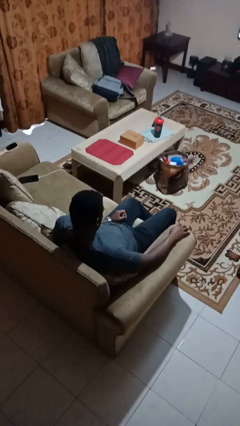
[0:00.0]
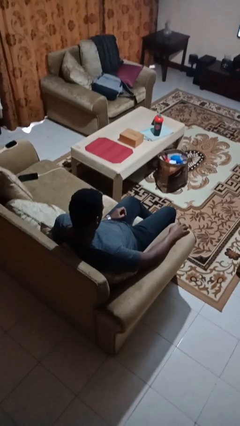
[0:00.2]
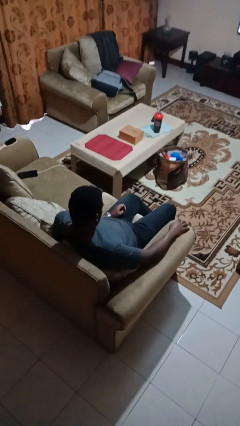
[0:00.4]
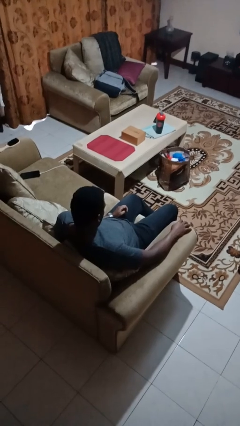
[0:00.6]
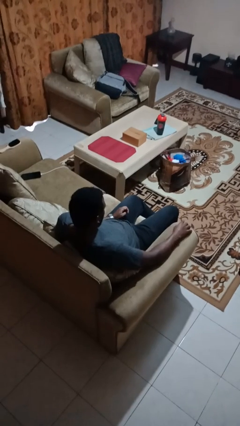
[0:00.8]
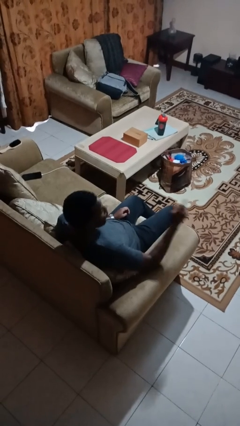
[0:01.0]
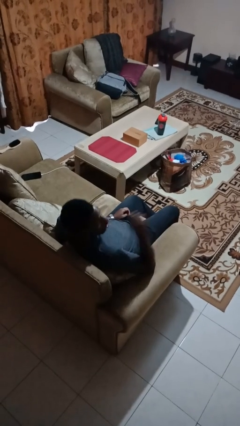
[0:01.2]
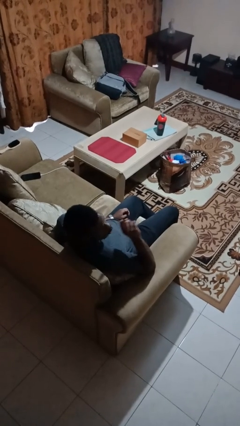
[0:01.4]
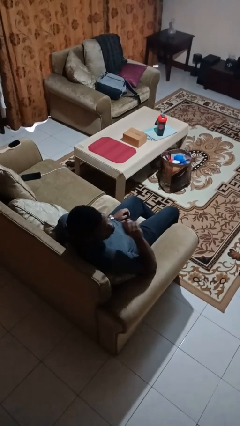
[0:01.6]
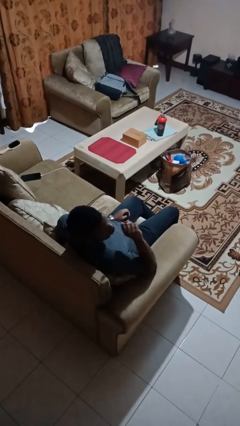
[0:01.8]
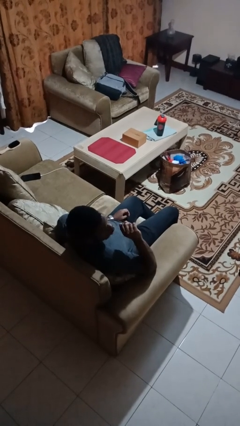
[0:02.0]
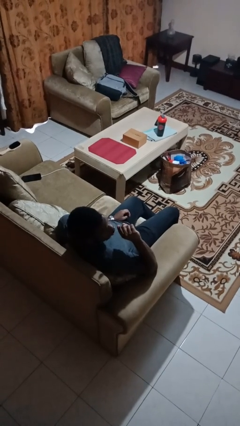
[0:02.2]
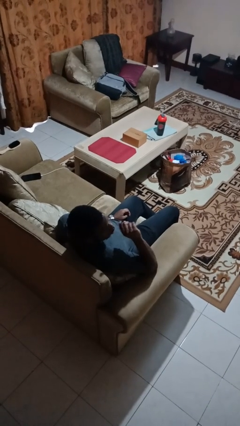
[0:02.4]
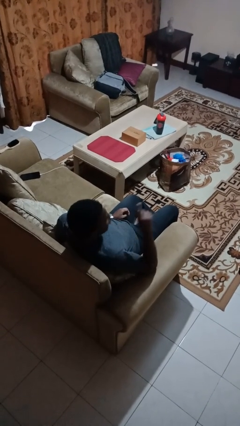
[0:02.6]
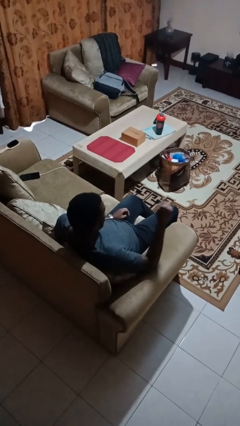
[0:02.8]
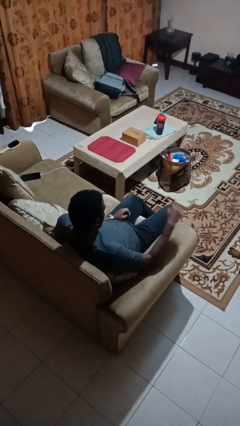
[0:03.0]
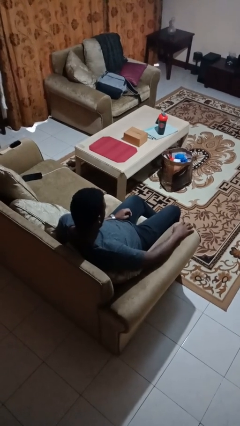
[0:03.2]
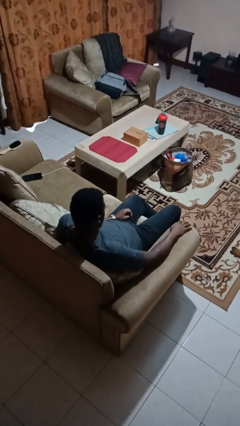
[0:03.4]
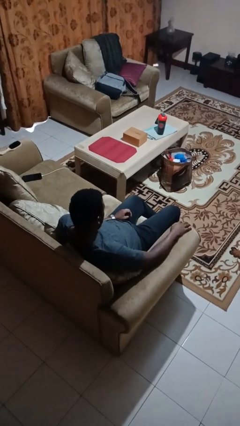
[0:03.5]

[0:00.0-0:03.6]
person gestures be quiet

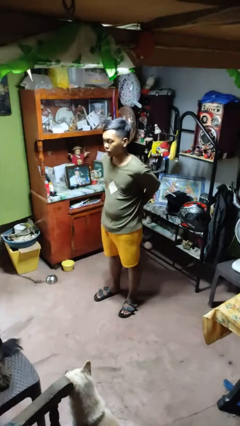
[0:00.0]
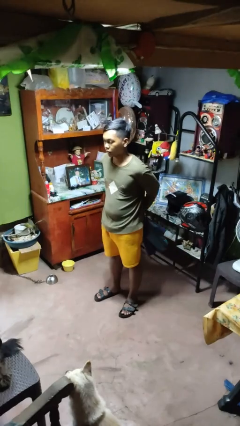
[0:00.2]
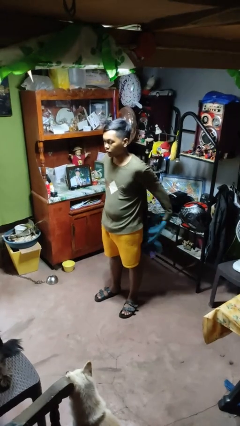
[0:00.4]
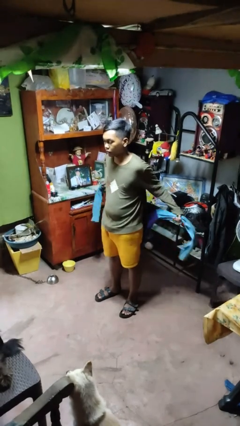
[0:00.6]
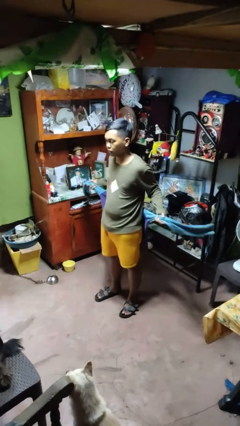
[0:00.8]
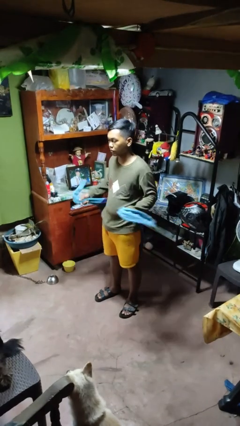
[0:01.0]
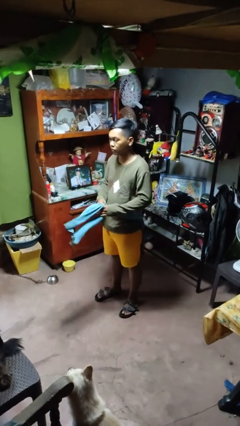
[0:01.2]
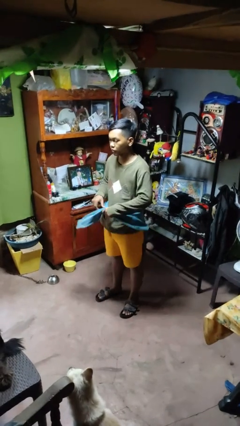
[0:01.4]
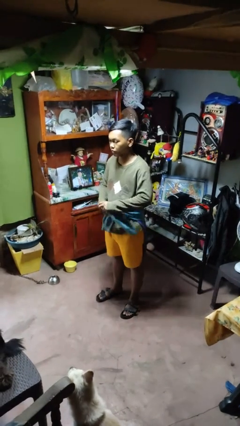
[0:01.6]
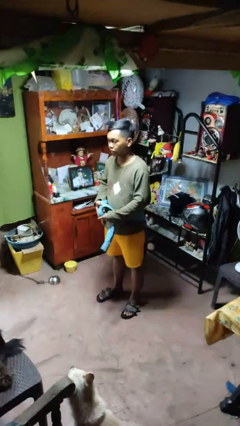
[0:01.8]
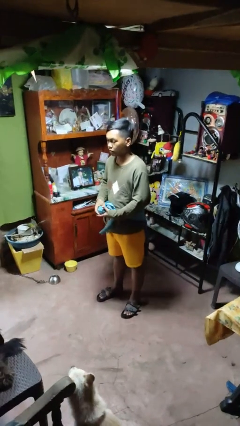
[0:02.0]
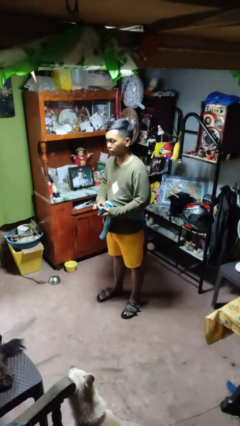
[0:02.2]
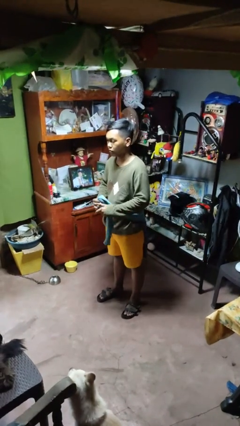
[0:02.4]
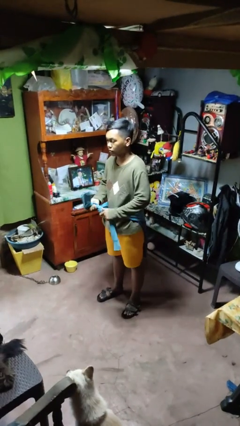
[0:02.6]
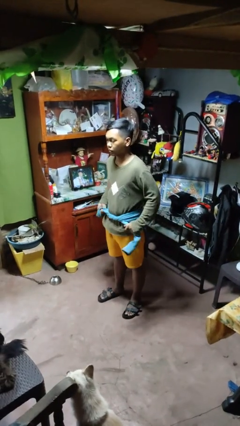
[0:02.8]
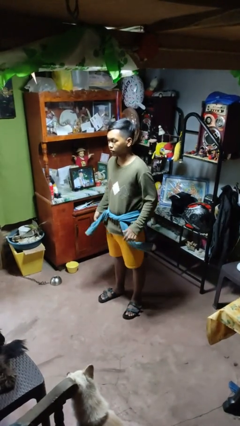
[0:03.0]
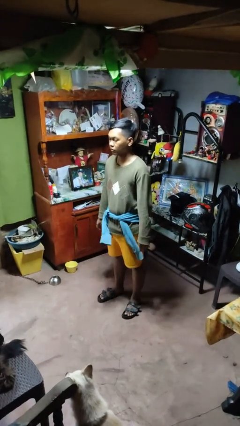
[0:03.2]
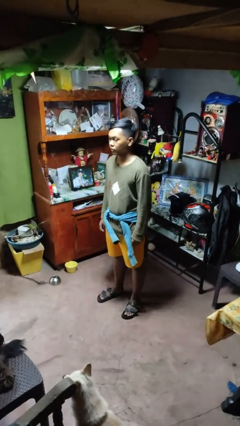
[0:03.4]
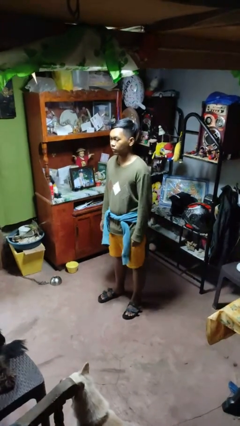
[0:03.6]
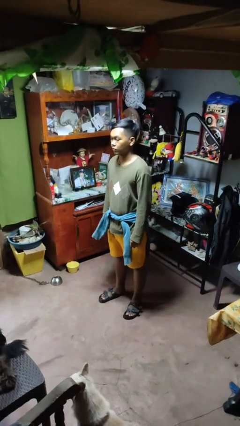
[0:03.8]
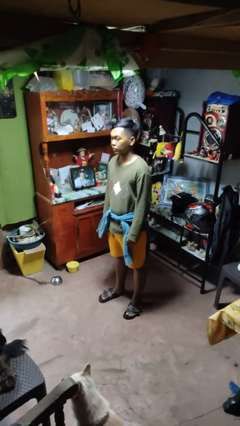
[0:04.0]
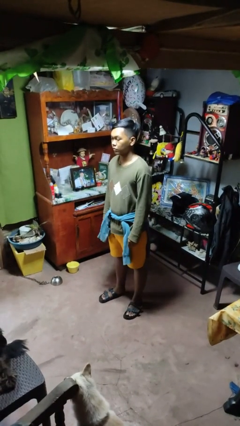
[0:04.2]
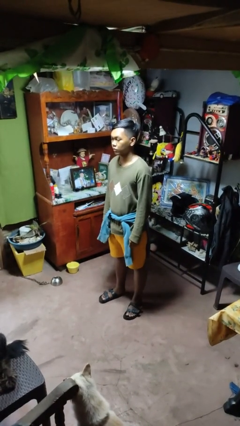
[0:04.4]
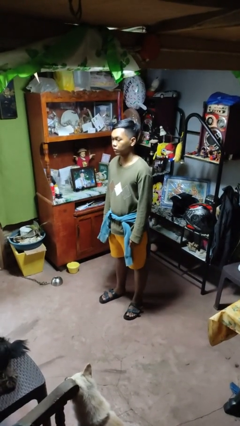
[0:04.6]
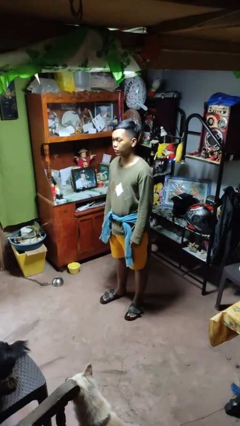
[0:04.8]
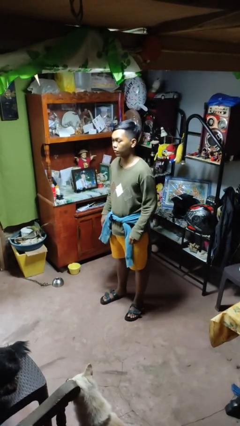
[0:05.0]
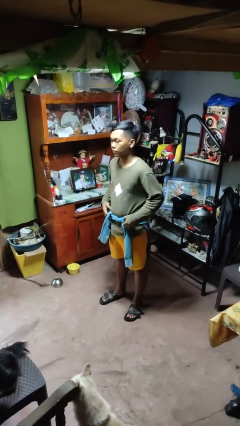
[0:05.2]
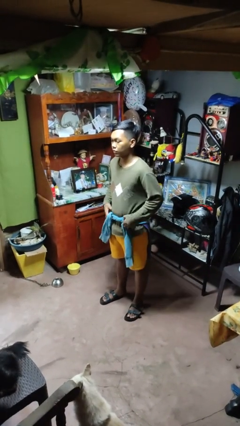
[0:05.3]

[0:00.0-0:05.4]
person ties jacket around waist

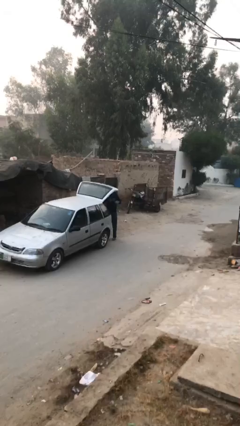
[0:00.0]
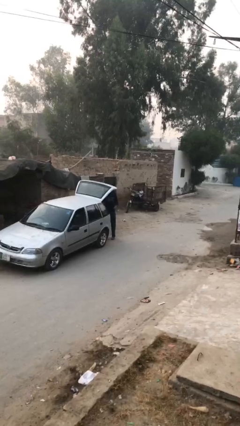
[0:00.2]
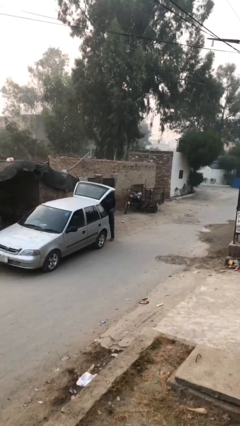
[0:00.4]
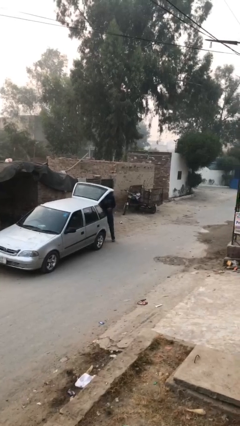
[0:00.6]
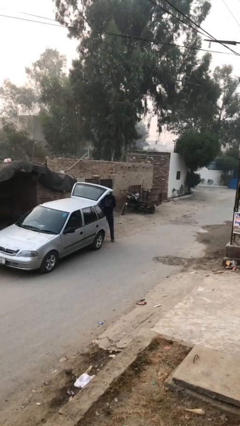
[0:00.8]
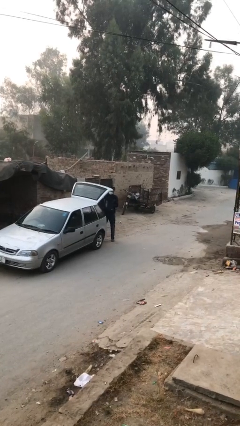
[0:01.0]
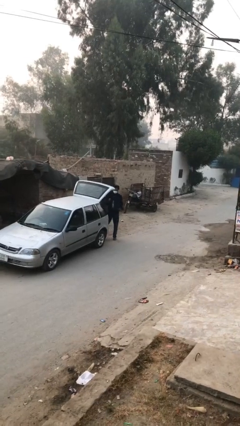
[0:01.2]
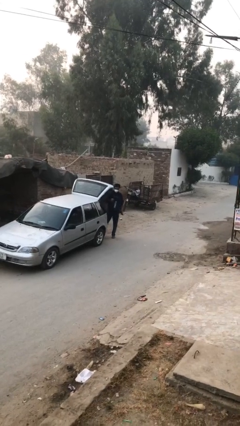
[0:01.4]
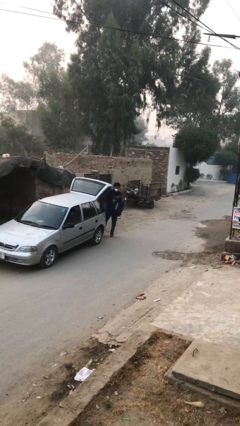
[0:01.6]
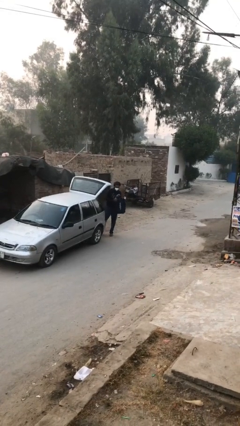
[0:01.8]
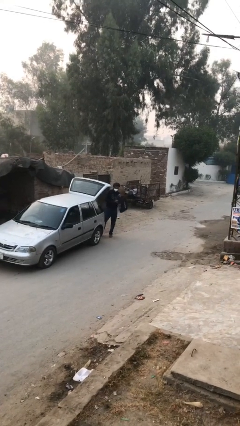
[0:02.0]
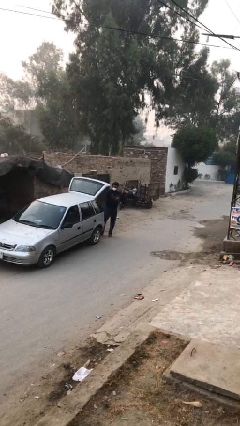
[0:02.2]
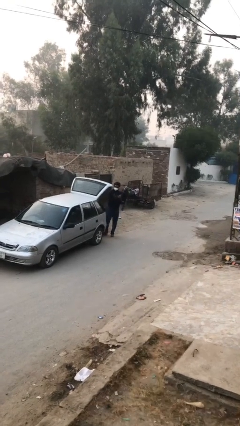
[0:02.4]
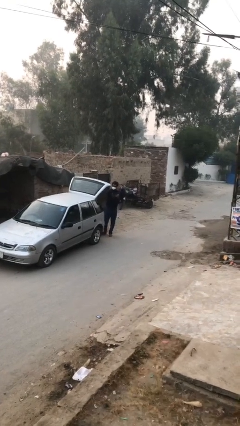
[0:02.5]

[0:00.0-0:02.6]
person unloads car

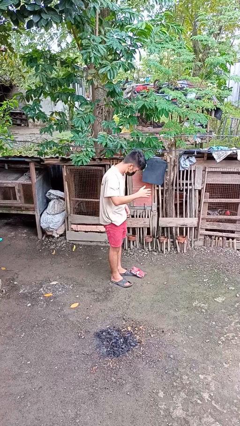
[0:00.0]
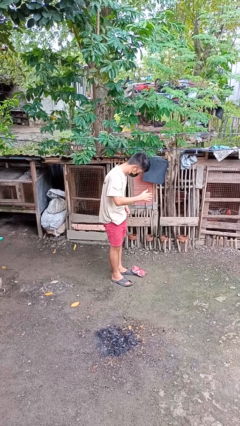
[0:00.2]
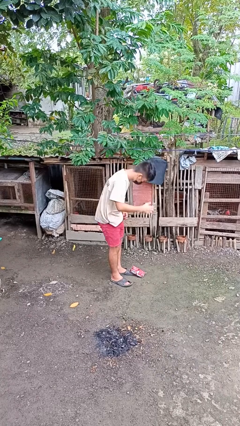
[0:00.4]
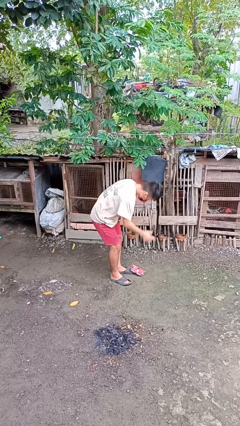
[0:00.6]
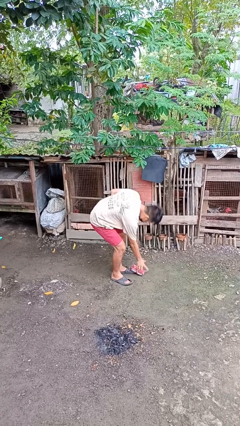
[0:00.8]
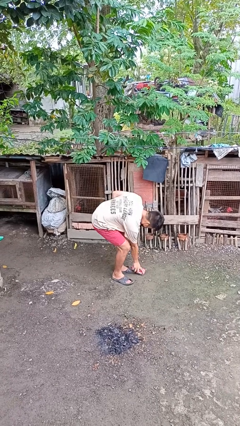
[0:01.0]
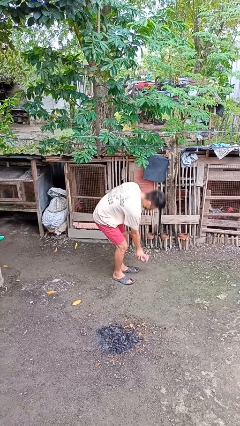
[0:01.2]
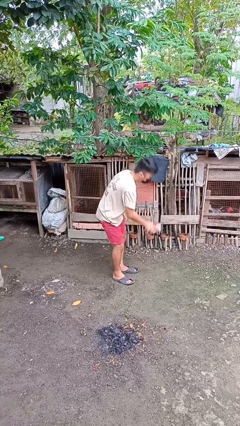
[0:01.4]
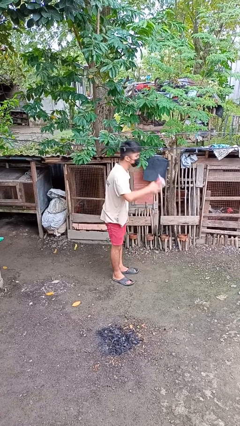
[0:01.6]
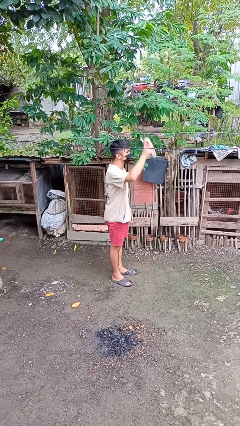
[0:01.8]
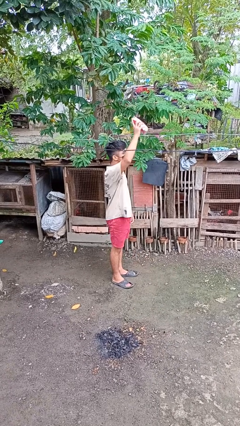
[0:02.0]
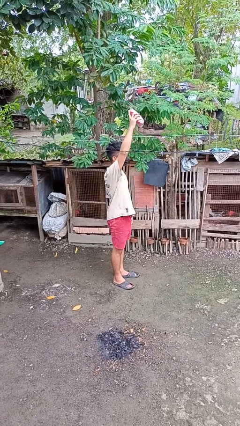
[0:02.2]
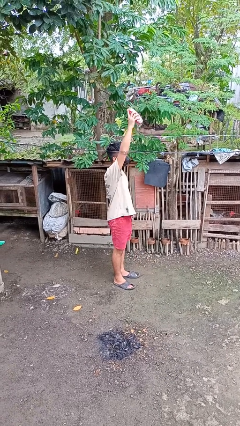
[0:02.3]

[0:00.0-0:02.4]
person picks up object from floor

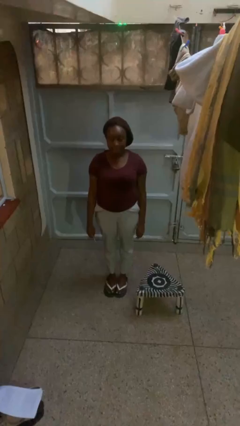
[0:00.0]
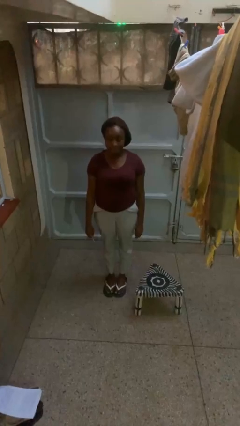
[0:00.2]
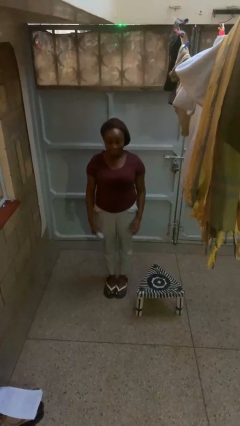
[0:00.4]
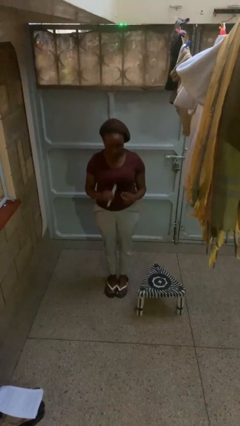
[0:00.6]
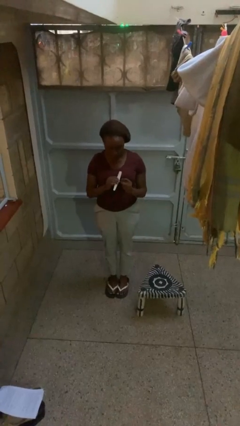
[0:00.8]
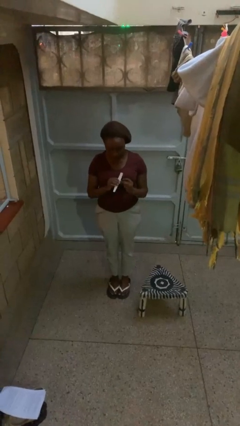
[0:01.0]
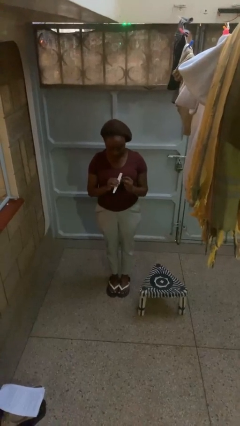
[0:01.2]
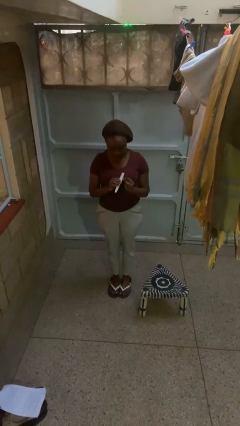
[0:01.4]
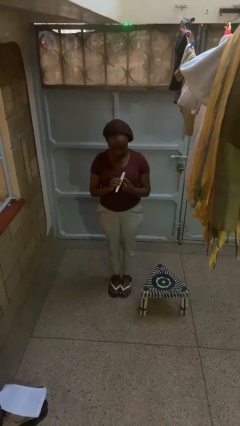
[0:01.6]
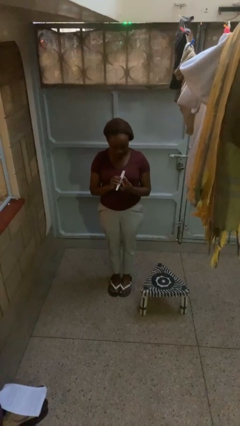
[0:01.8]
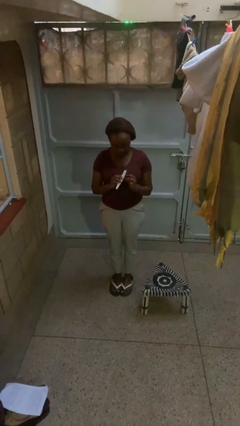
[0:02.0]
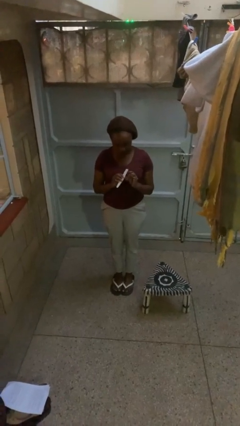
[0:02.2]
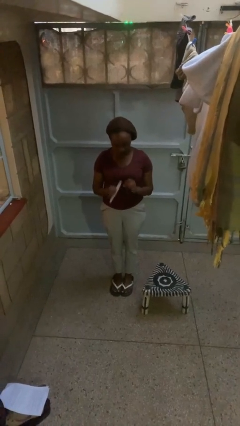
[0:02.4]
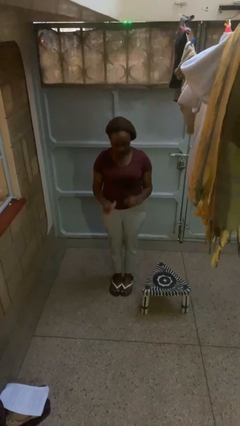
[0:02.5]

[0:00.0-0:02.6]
person files fingernails

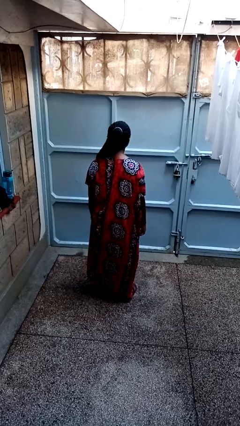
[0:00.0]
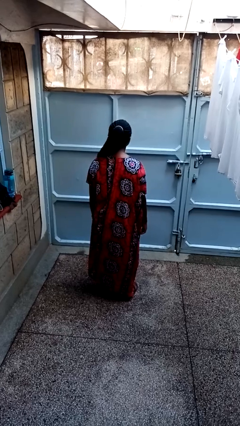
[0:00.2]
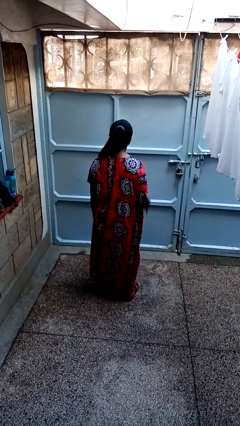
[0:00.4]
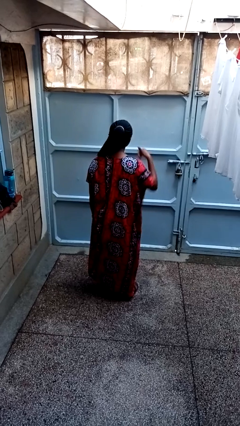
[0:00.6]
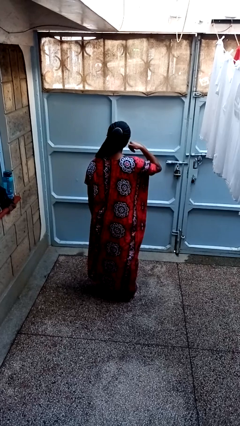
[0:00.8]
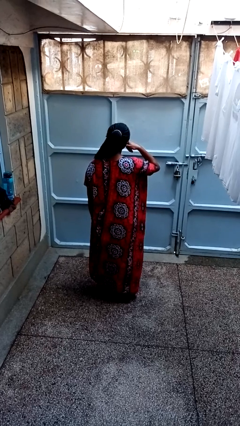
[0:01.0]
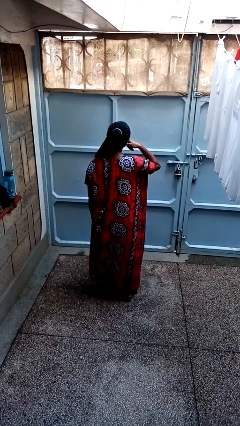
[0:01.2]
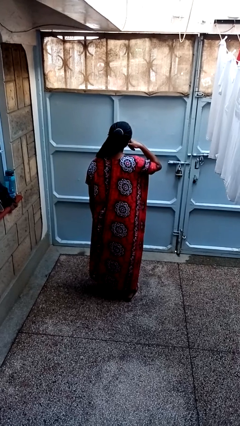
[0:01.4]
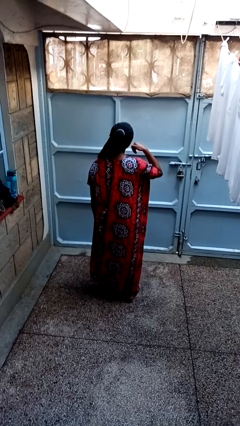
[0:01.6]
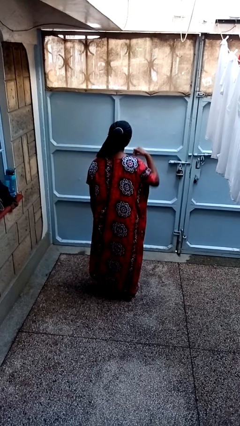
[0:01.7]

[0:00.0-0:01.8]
person gestures call me
